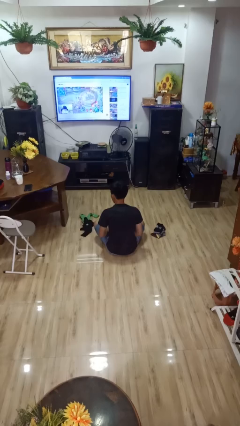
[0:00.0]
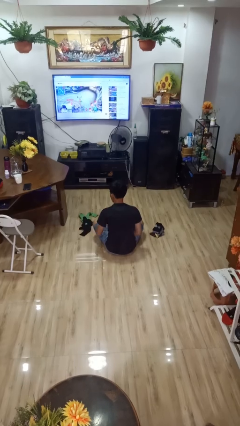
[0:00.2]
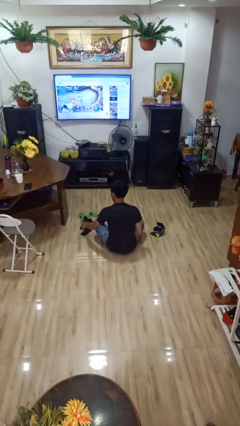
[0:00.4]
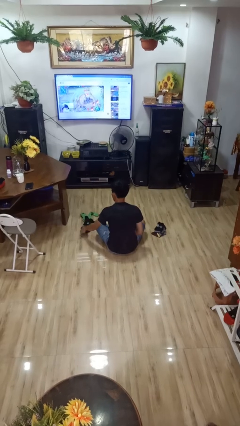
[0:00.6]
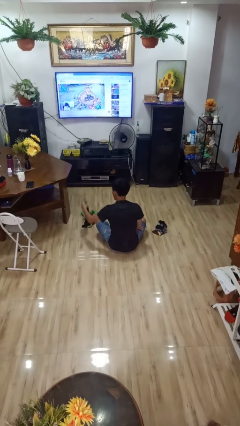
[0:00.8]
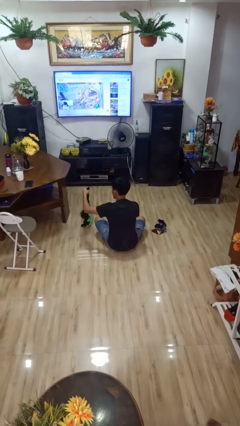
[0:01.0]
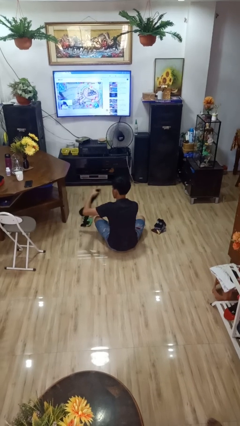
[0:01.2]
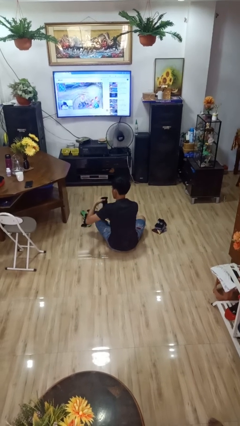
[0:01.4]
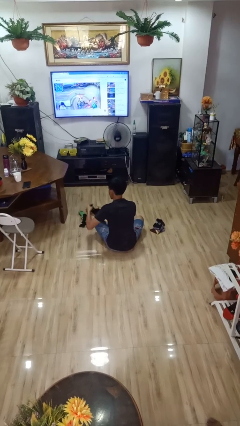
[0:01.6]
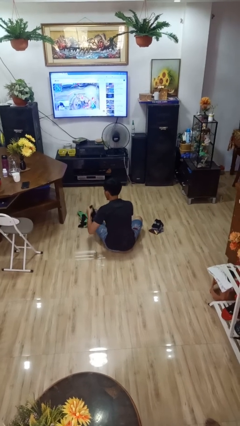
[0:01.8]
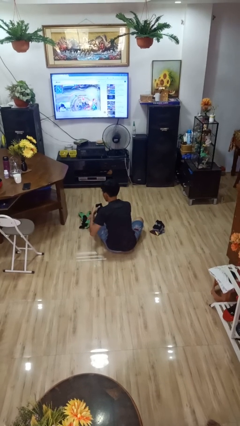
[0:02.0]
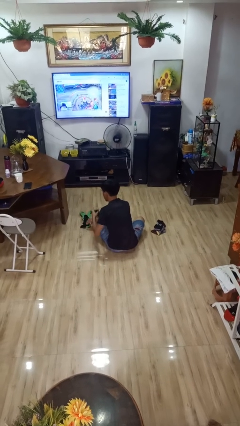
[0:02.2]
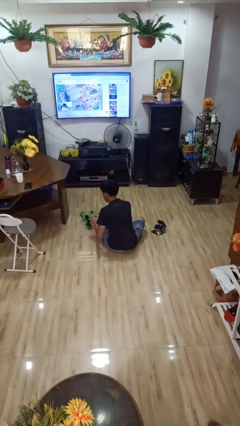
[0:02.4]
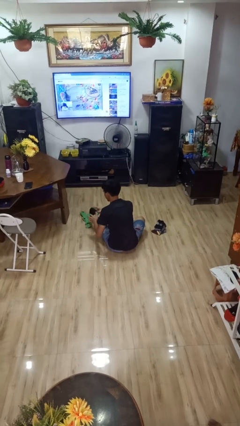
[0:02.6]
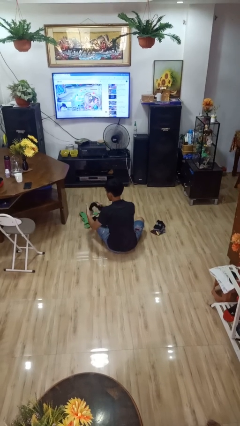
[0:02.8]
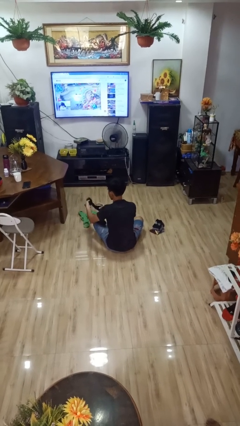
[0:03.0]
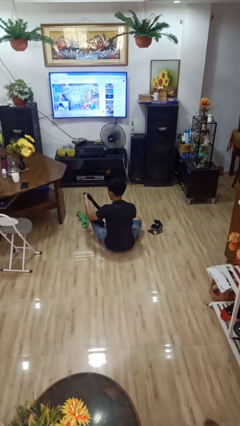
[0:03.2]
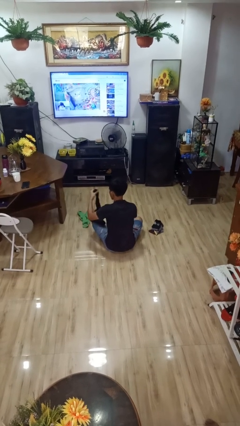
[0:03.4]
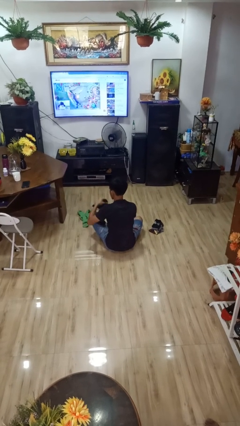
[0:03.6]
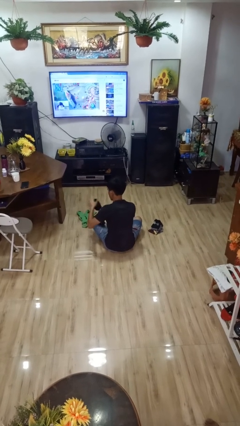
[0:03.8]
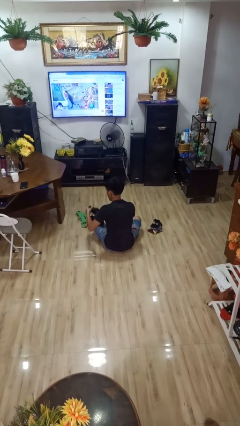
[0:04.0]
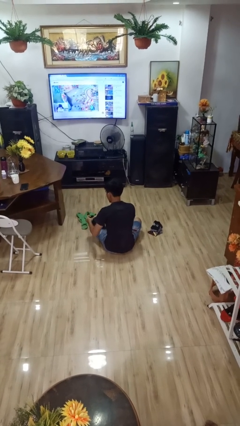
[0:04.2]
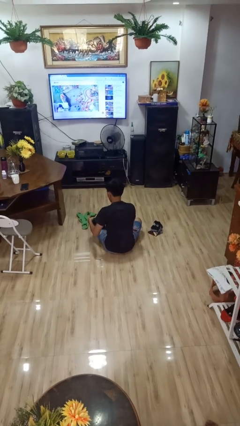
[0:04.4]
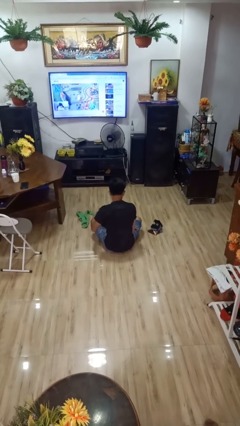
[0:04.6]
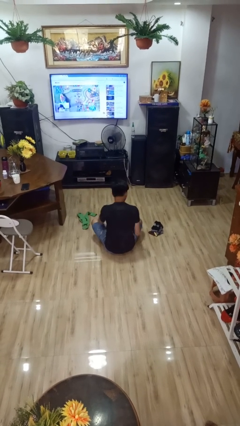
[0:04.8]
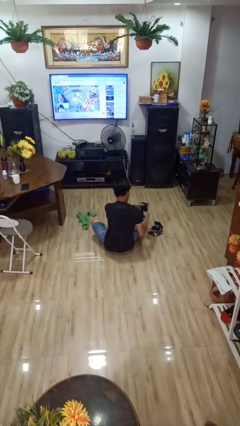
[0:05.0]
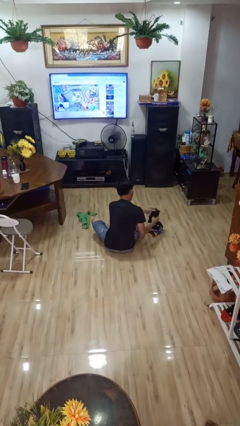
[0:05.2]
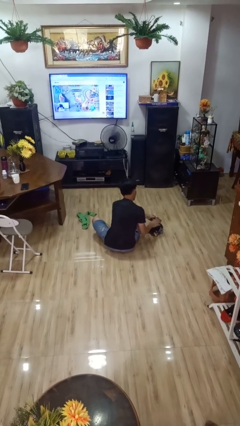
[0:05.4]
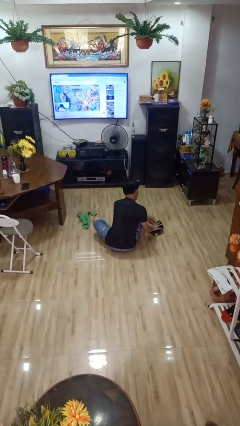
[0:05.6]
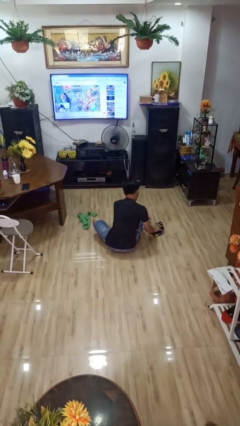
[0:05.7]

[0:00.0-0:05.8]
person folds socks

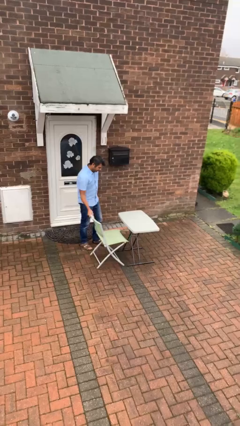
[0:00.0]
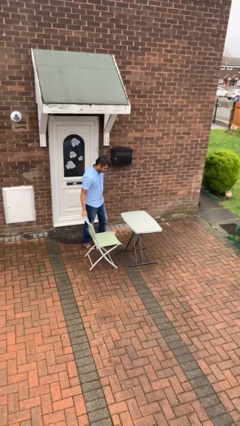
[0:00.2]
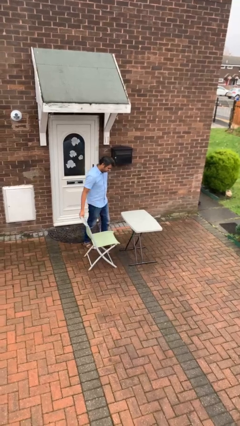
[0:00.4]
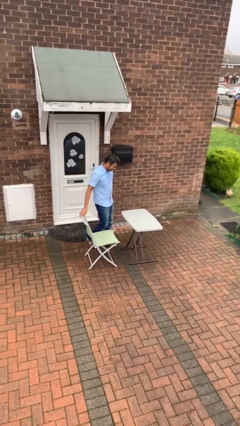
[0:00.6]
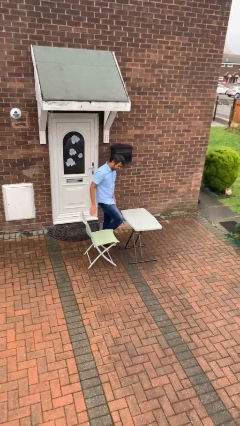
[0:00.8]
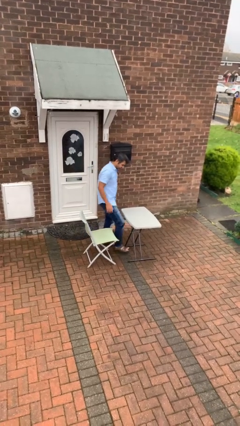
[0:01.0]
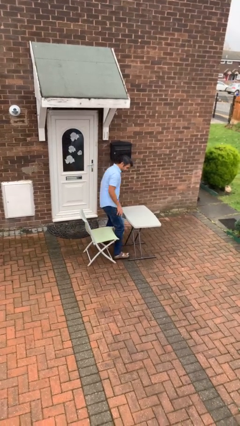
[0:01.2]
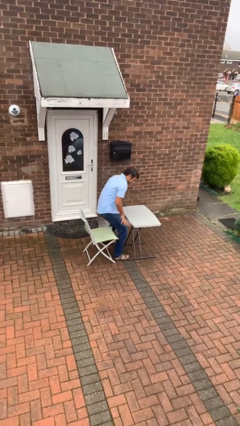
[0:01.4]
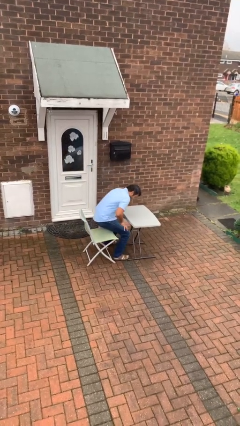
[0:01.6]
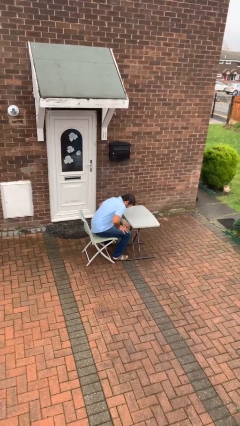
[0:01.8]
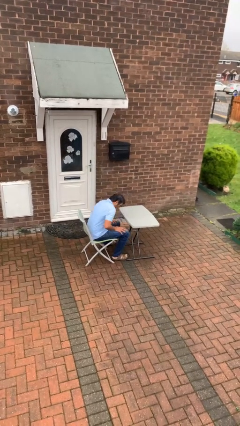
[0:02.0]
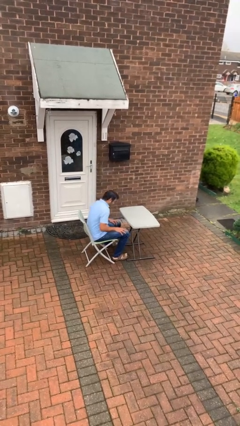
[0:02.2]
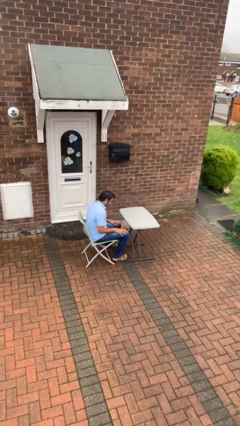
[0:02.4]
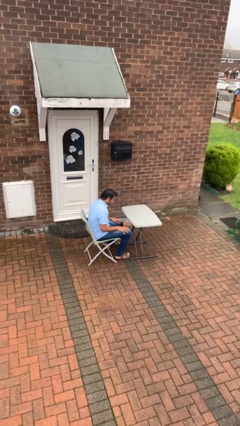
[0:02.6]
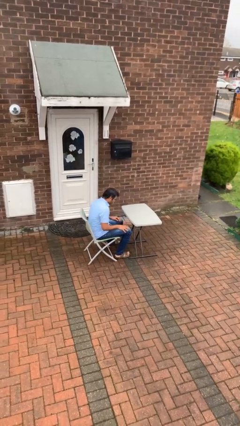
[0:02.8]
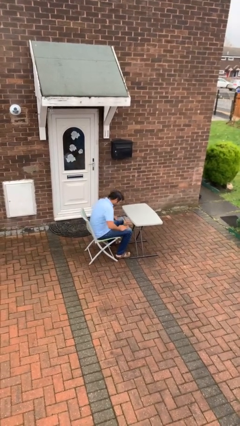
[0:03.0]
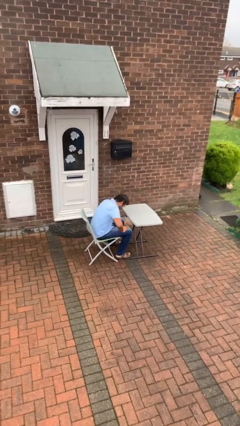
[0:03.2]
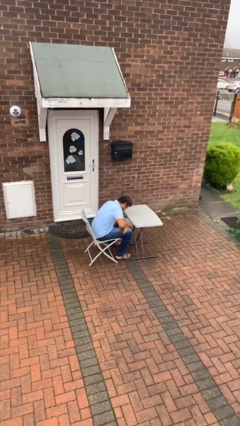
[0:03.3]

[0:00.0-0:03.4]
person sits down

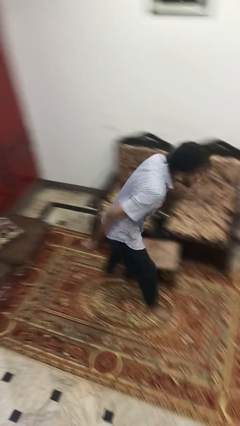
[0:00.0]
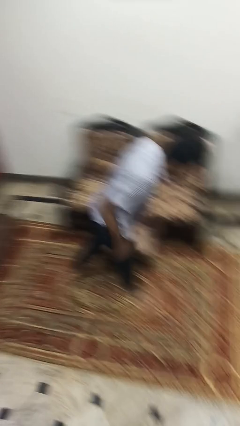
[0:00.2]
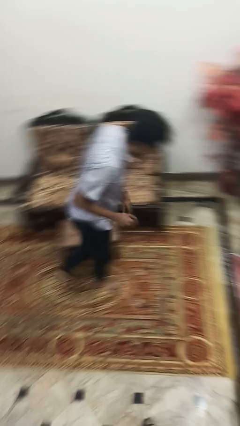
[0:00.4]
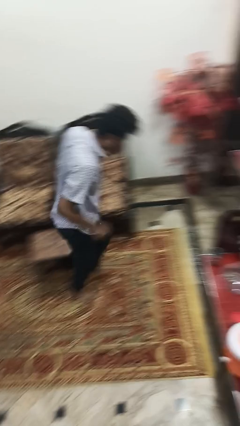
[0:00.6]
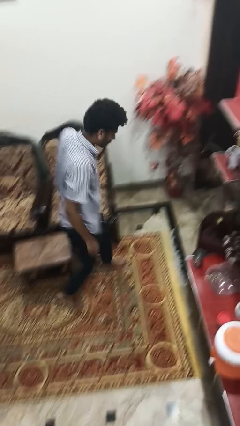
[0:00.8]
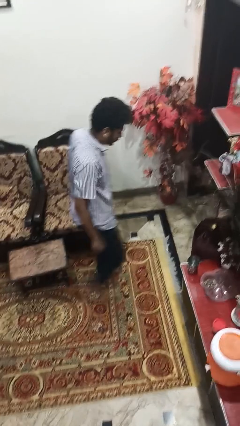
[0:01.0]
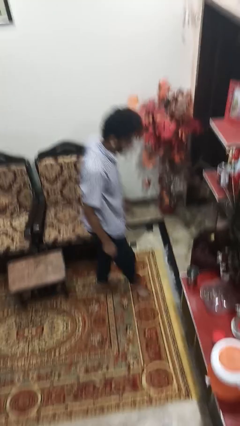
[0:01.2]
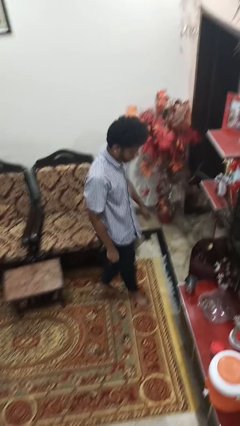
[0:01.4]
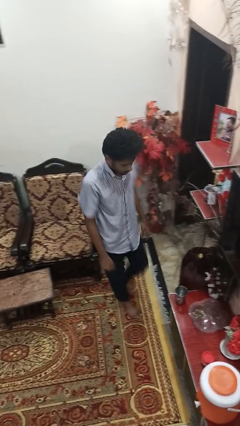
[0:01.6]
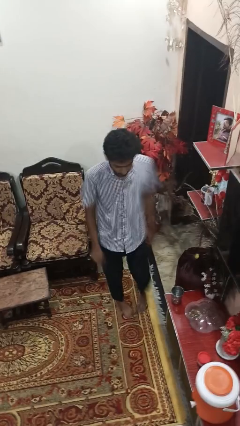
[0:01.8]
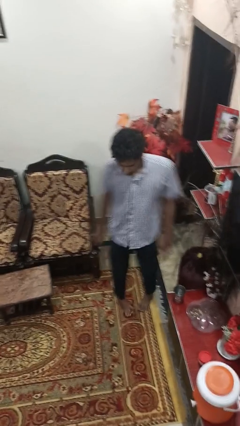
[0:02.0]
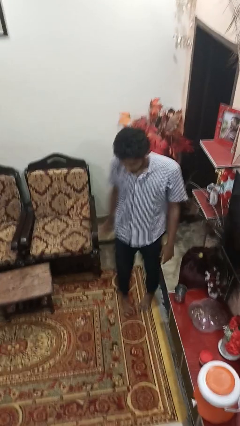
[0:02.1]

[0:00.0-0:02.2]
person bumps into table

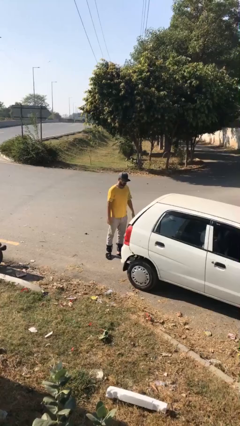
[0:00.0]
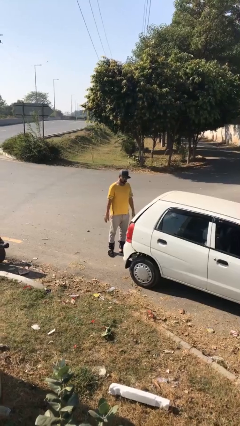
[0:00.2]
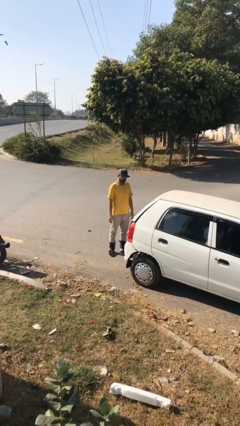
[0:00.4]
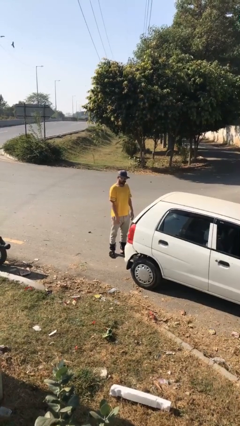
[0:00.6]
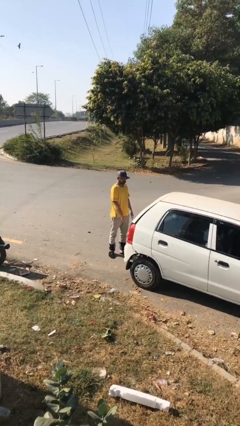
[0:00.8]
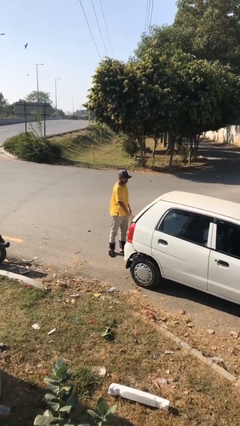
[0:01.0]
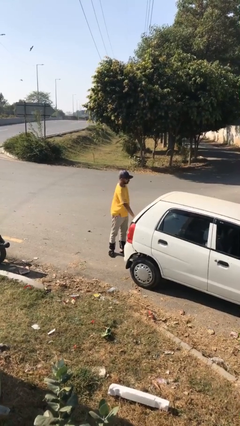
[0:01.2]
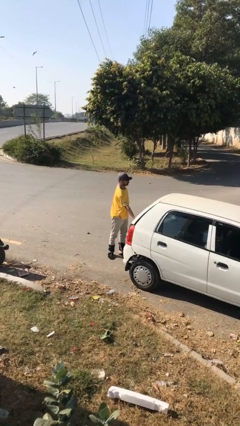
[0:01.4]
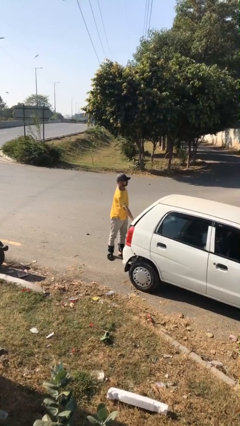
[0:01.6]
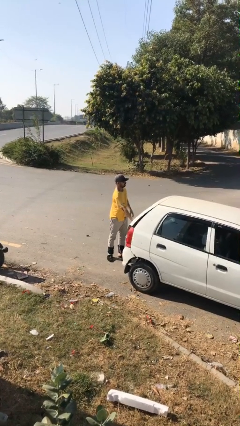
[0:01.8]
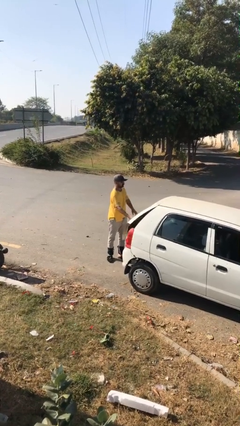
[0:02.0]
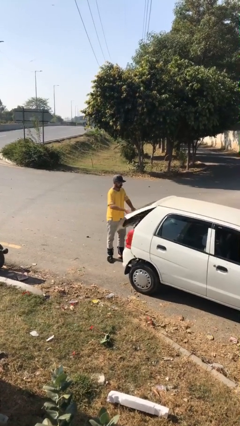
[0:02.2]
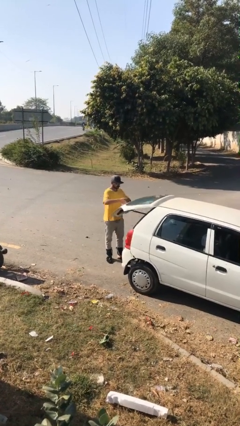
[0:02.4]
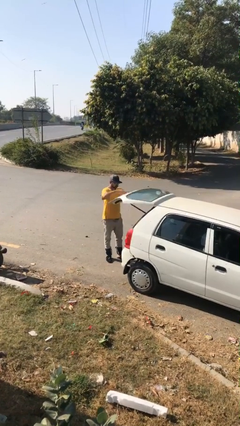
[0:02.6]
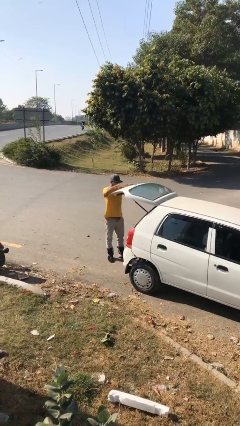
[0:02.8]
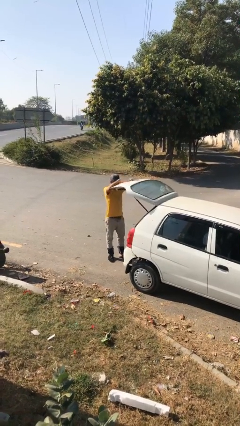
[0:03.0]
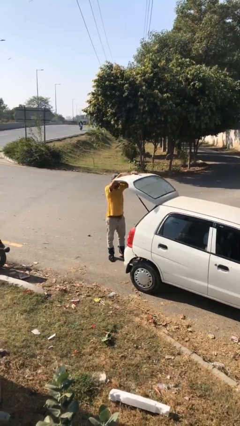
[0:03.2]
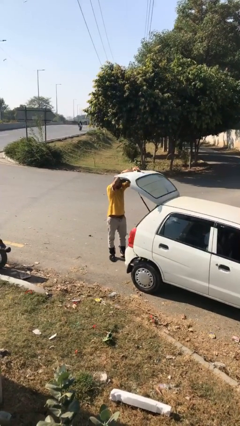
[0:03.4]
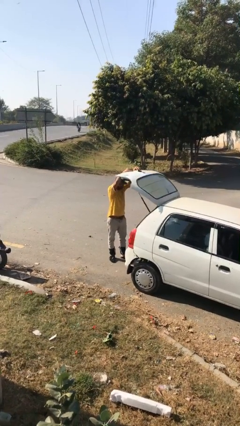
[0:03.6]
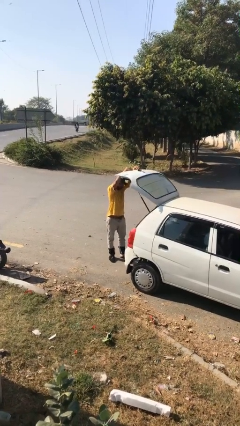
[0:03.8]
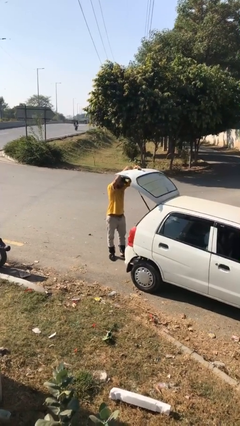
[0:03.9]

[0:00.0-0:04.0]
person opens car trunk

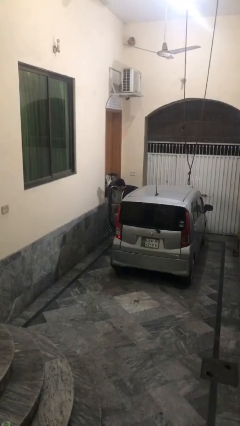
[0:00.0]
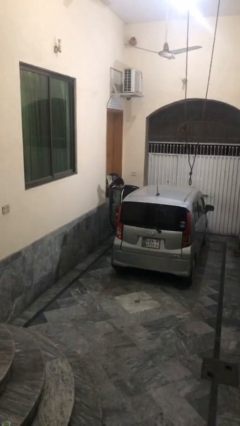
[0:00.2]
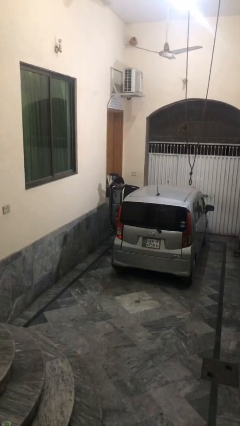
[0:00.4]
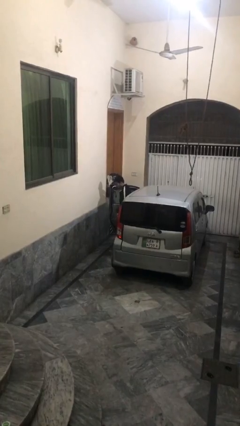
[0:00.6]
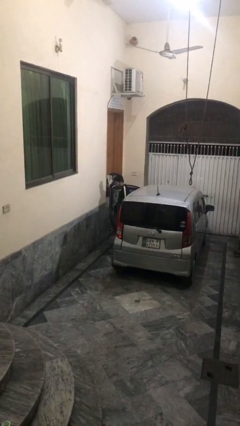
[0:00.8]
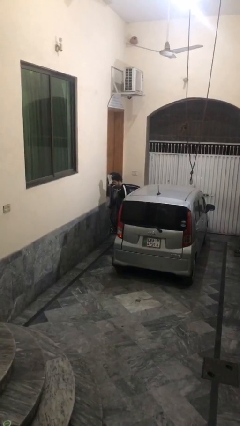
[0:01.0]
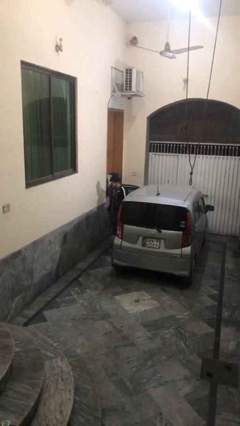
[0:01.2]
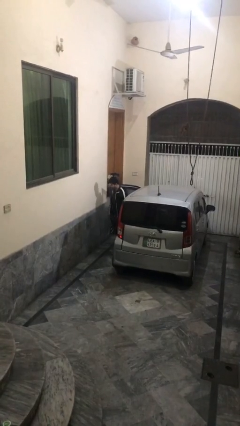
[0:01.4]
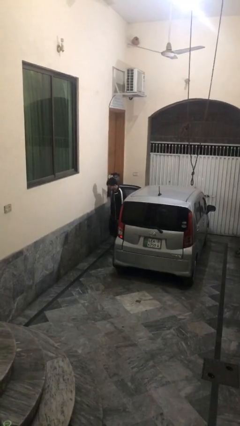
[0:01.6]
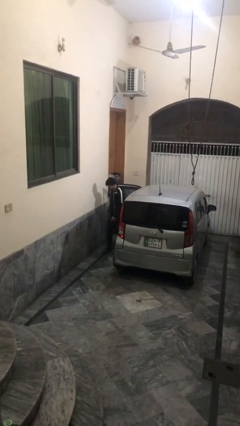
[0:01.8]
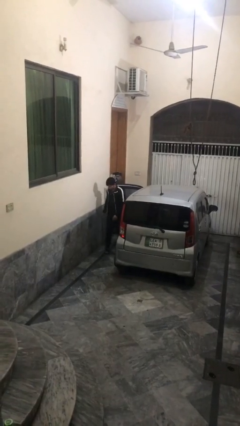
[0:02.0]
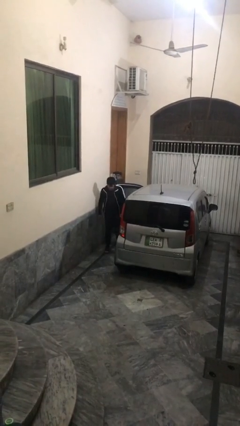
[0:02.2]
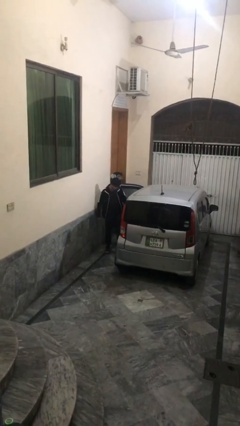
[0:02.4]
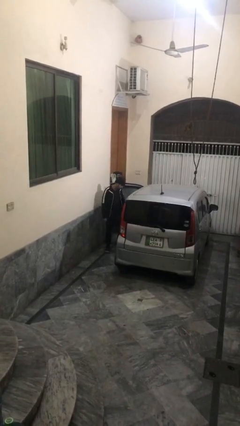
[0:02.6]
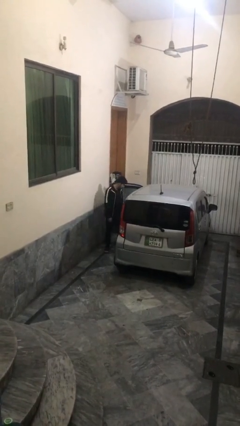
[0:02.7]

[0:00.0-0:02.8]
person exits car
